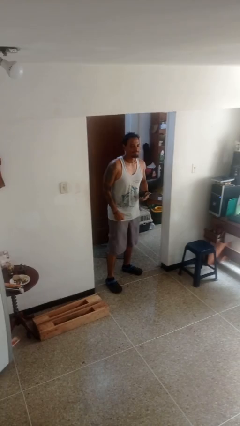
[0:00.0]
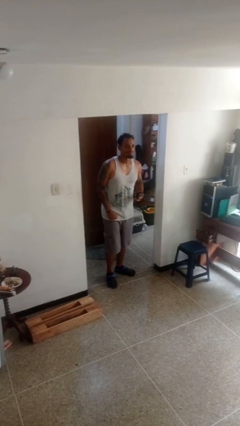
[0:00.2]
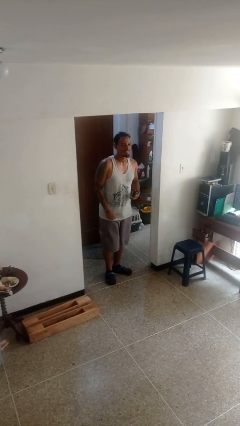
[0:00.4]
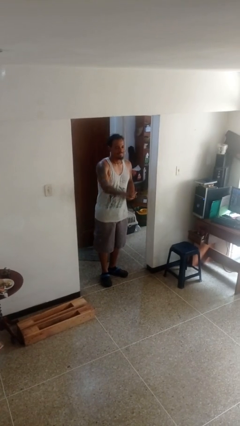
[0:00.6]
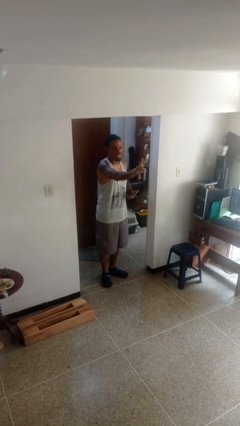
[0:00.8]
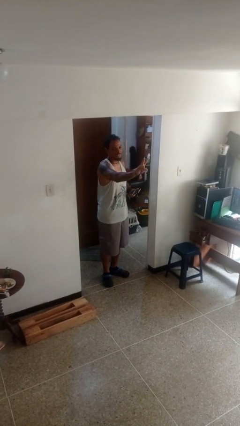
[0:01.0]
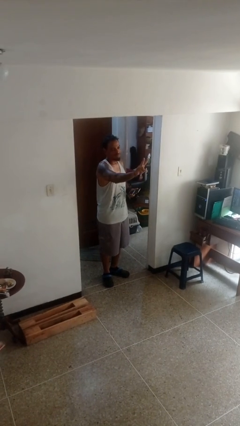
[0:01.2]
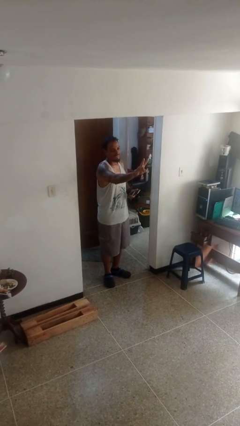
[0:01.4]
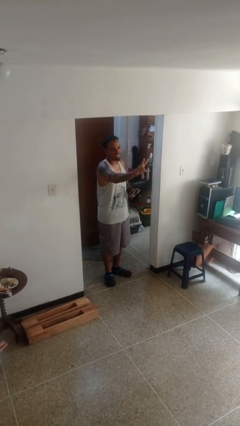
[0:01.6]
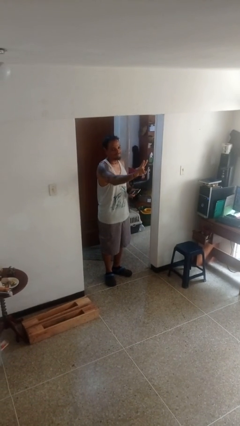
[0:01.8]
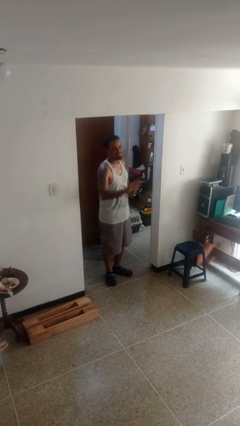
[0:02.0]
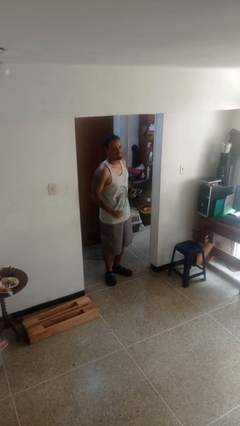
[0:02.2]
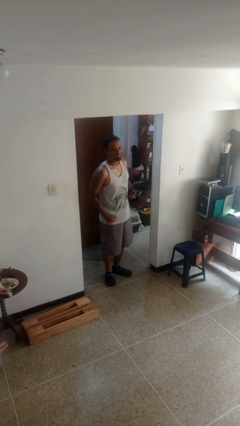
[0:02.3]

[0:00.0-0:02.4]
person gestures peace

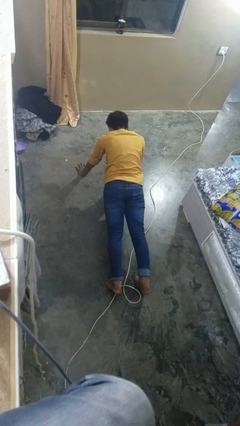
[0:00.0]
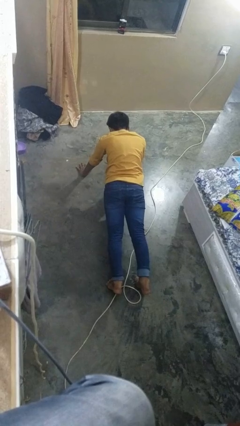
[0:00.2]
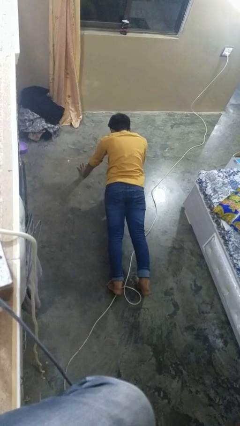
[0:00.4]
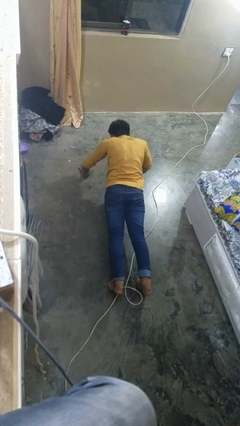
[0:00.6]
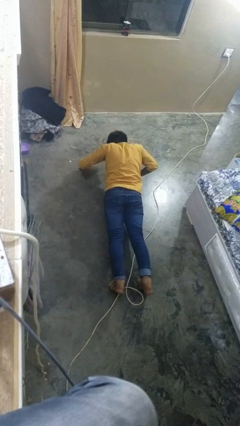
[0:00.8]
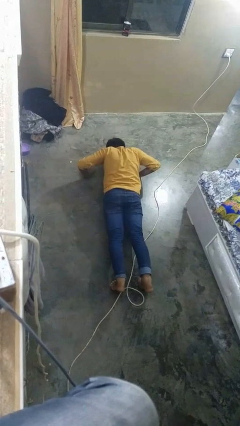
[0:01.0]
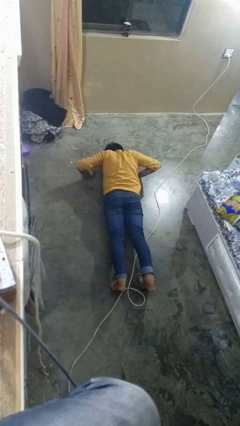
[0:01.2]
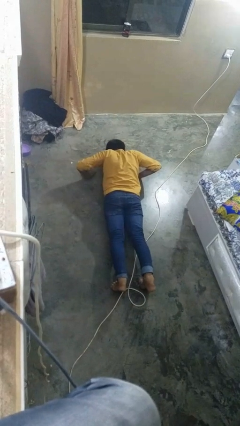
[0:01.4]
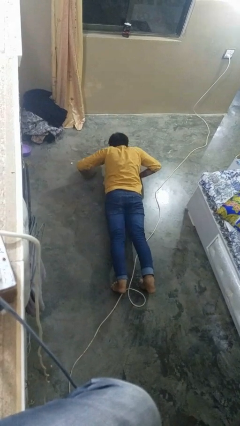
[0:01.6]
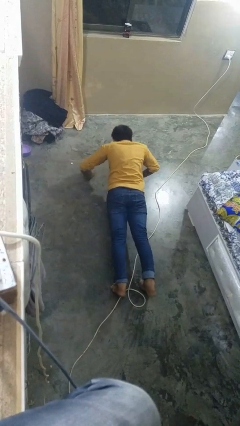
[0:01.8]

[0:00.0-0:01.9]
person exercises with pushup

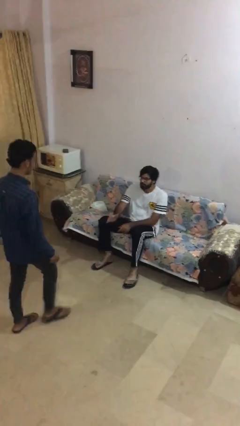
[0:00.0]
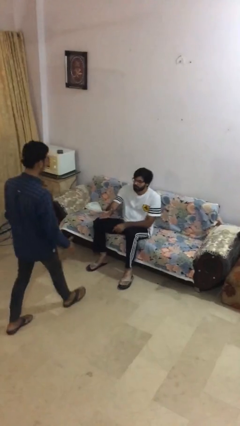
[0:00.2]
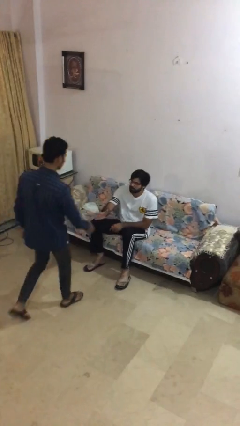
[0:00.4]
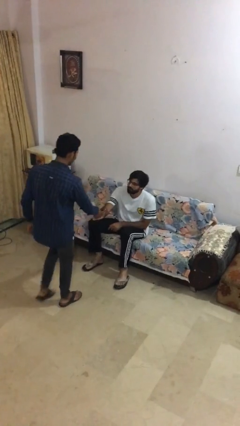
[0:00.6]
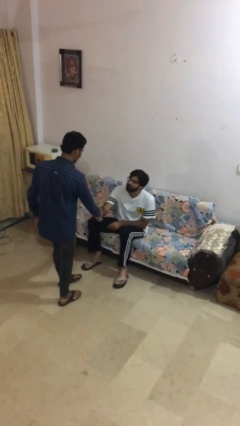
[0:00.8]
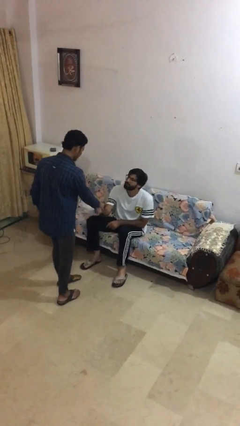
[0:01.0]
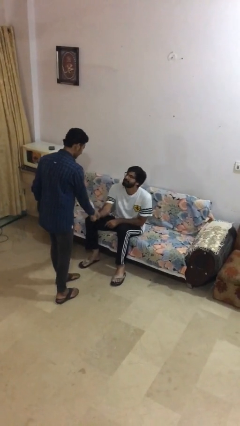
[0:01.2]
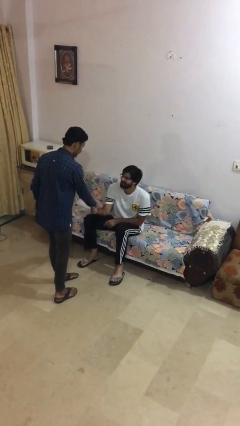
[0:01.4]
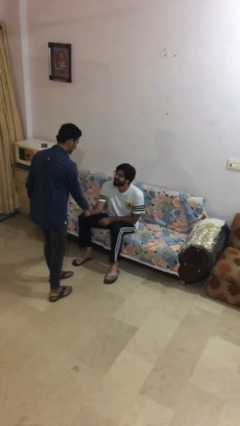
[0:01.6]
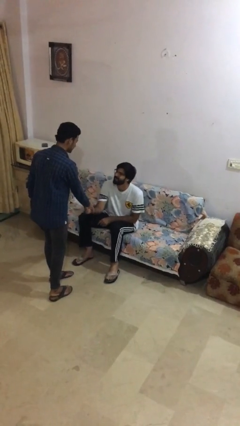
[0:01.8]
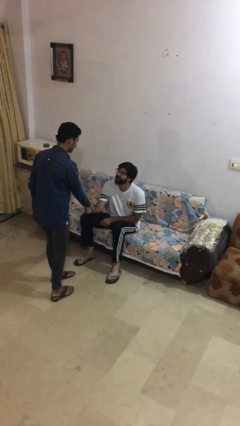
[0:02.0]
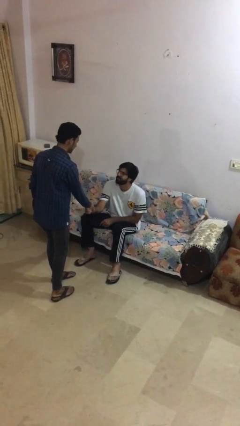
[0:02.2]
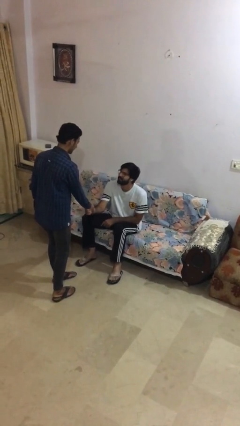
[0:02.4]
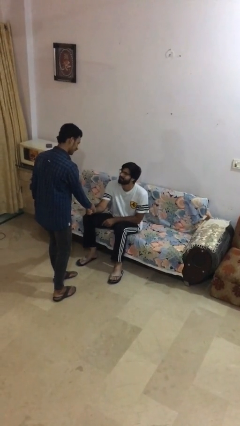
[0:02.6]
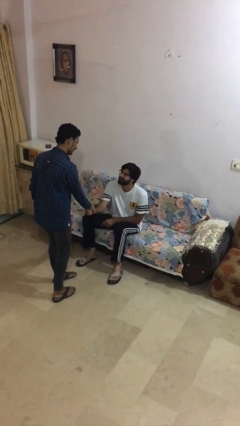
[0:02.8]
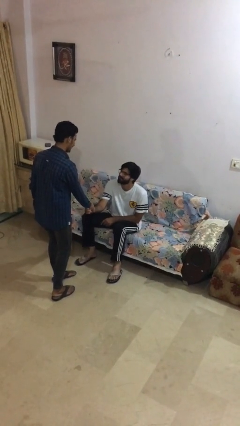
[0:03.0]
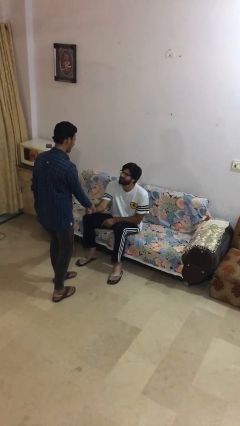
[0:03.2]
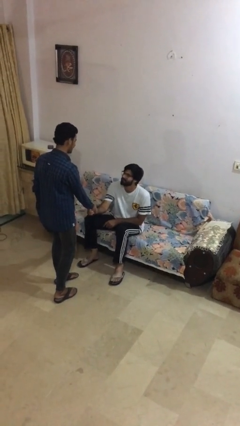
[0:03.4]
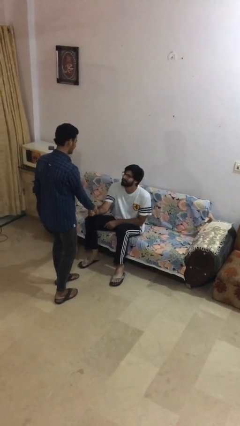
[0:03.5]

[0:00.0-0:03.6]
person shakes hand

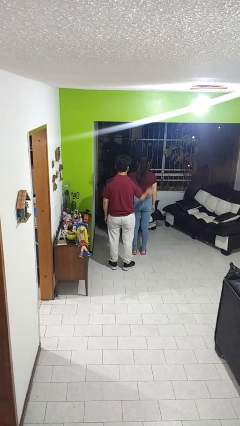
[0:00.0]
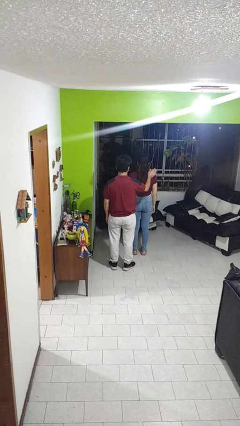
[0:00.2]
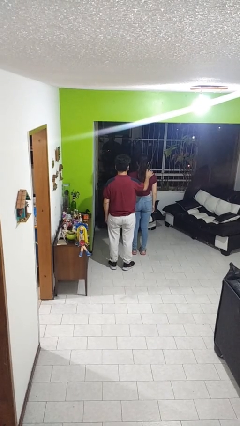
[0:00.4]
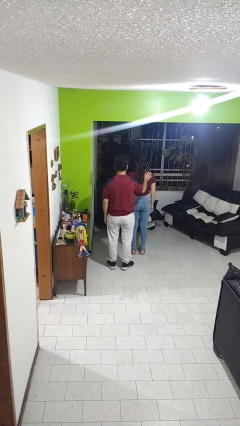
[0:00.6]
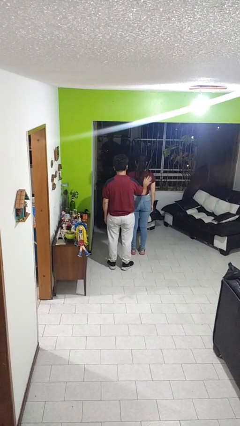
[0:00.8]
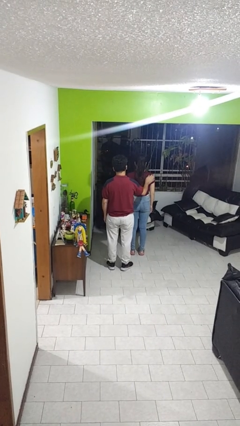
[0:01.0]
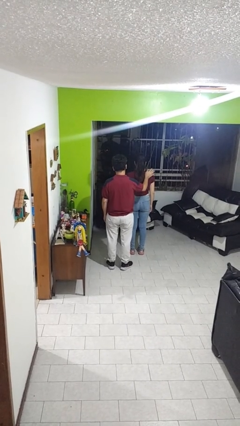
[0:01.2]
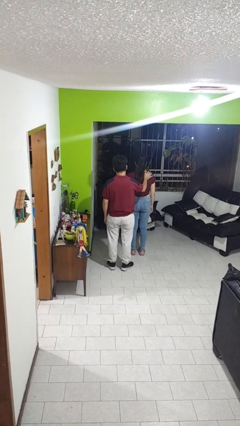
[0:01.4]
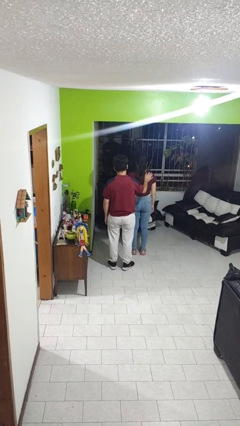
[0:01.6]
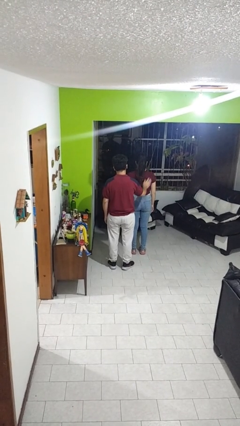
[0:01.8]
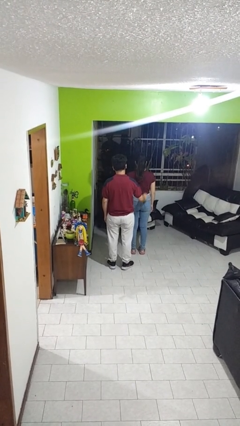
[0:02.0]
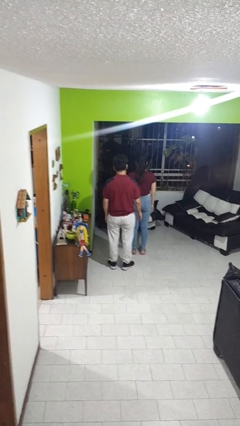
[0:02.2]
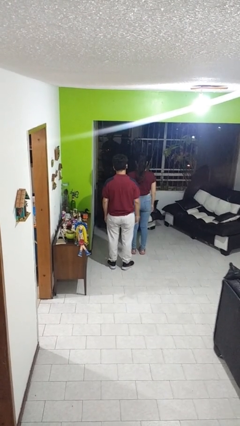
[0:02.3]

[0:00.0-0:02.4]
person touches back of person

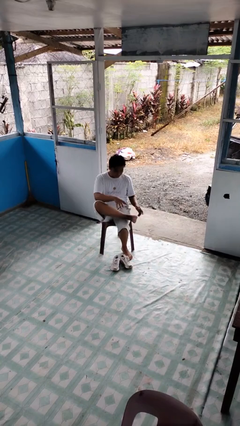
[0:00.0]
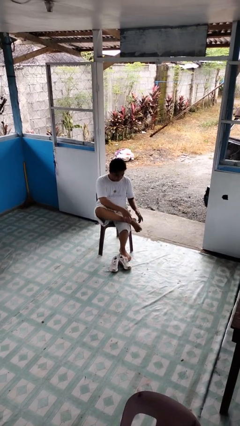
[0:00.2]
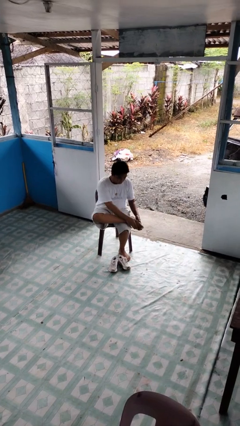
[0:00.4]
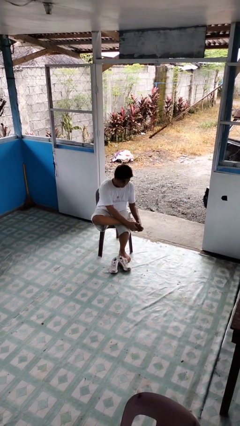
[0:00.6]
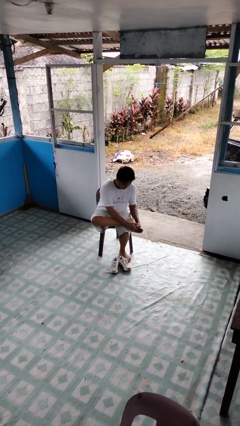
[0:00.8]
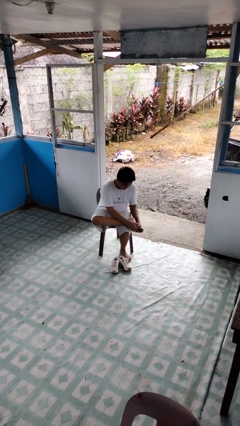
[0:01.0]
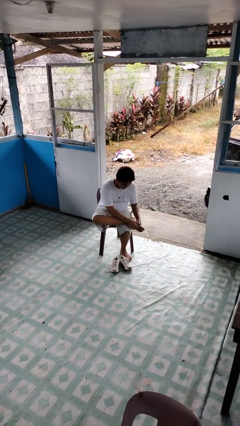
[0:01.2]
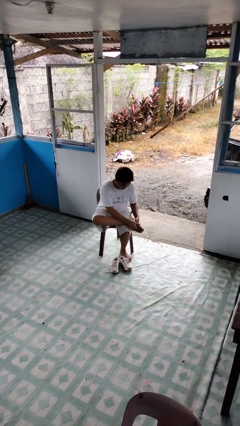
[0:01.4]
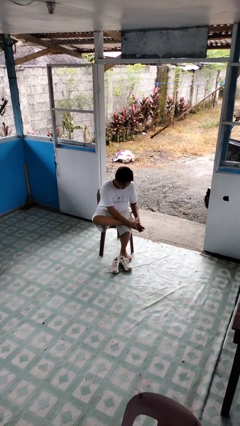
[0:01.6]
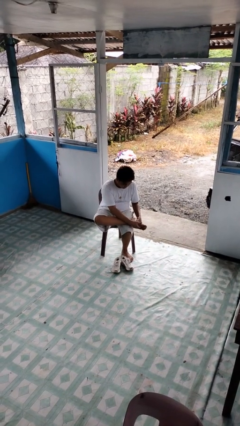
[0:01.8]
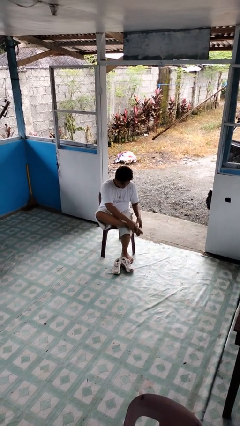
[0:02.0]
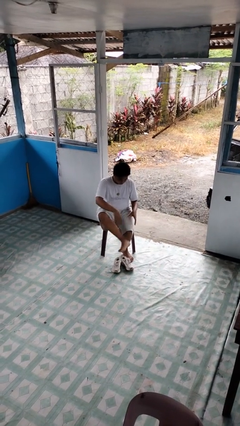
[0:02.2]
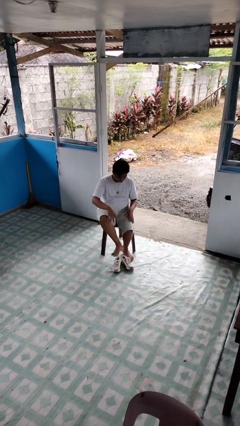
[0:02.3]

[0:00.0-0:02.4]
person rubs foot

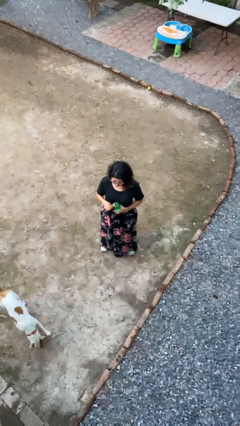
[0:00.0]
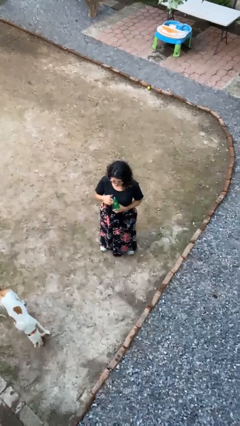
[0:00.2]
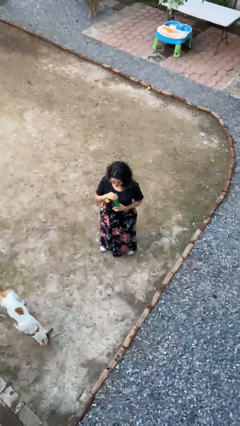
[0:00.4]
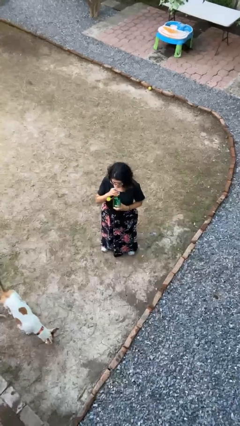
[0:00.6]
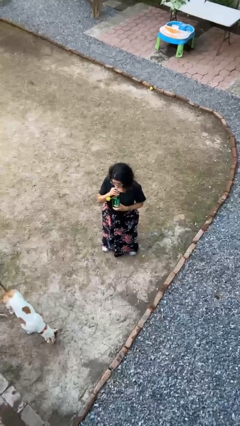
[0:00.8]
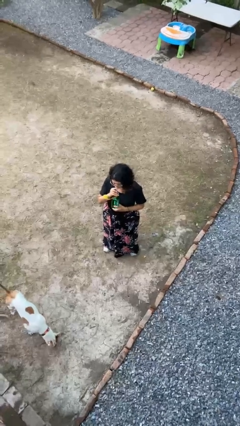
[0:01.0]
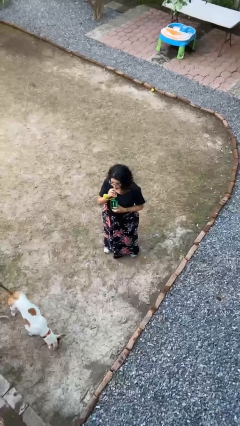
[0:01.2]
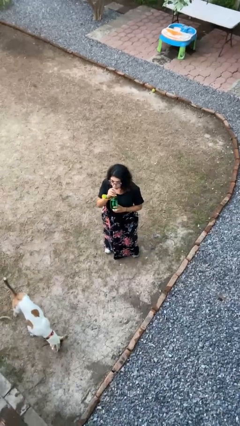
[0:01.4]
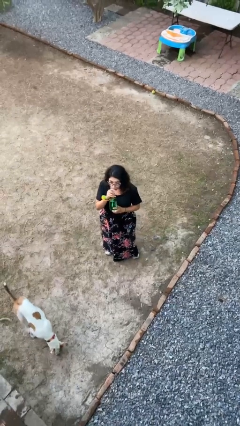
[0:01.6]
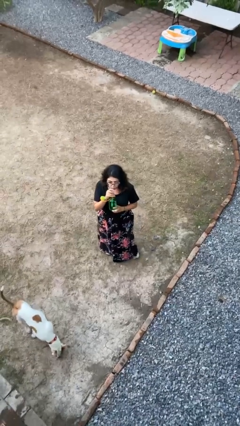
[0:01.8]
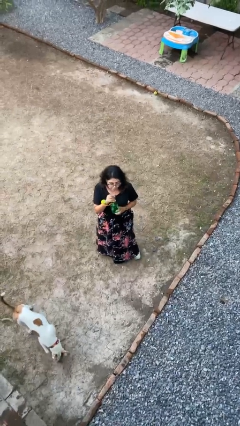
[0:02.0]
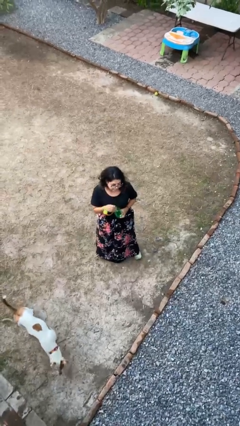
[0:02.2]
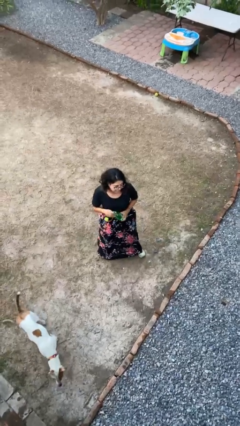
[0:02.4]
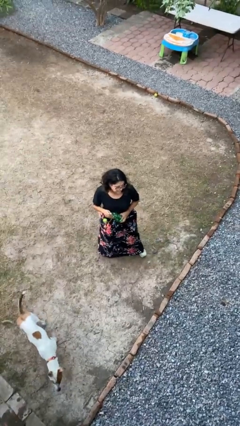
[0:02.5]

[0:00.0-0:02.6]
person drinks from straw

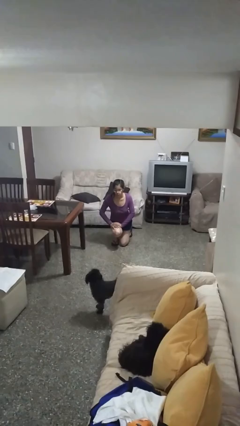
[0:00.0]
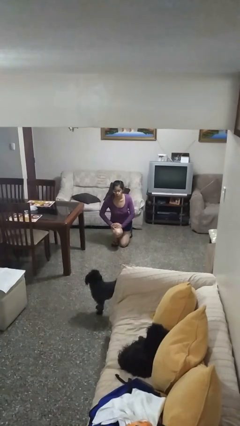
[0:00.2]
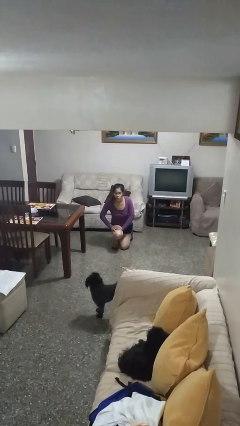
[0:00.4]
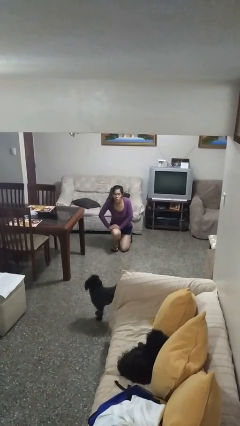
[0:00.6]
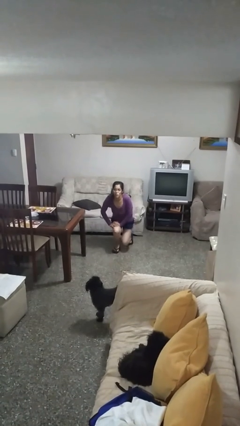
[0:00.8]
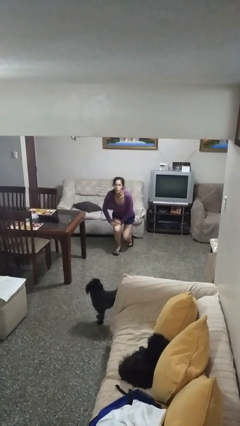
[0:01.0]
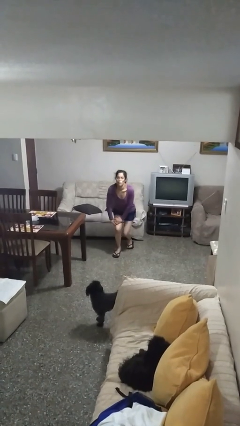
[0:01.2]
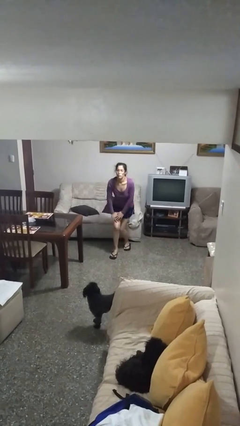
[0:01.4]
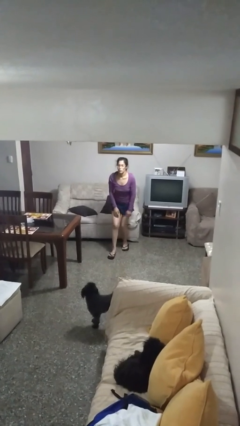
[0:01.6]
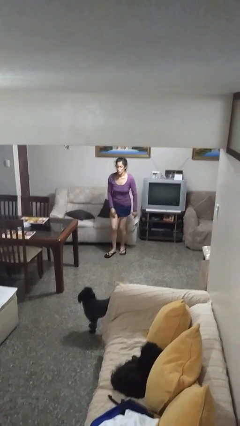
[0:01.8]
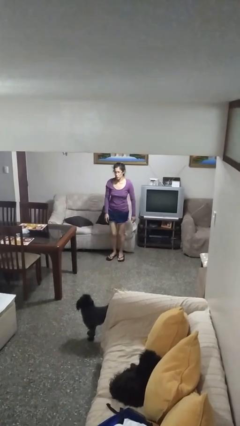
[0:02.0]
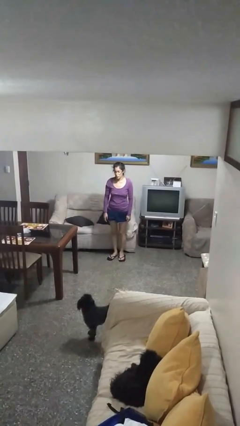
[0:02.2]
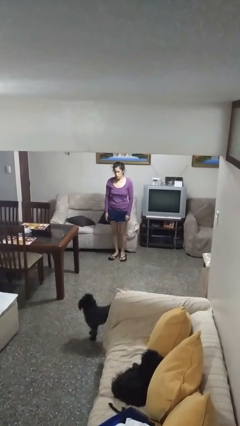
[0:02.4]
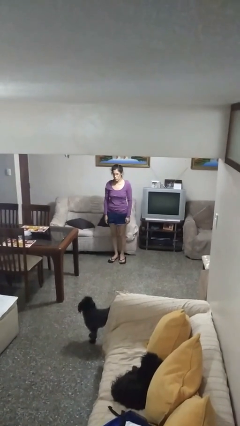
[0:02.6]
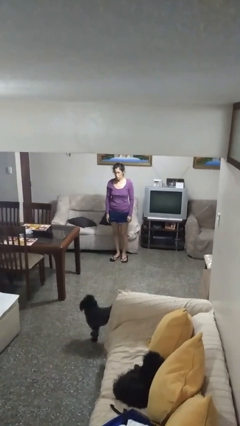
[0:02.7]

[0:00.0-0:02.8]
person stands up from floor
